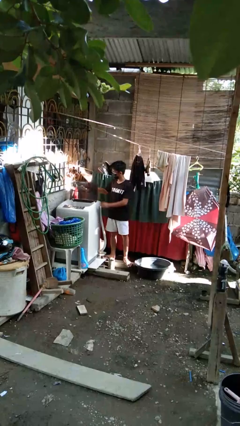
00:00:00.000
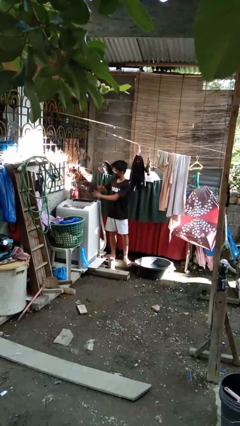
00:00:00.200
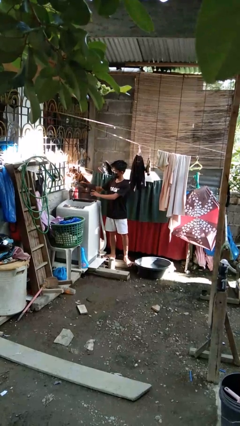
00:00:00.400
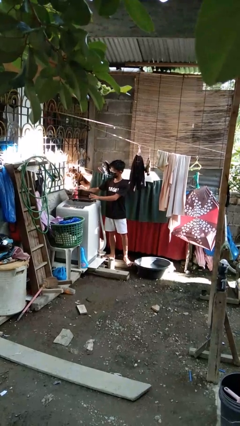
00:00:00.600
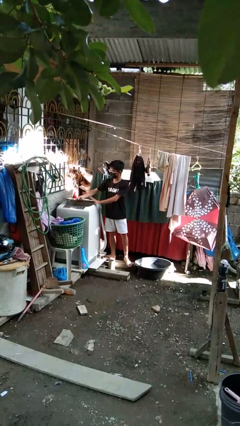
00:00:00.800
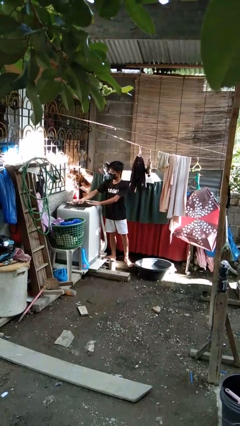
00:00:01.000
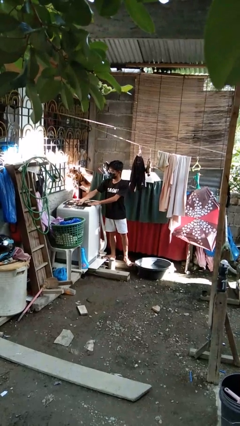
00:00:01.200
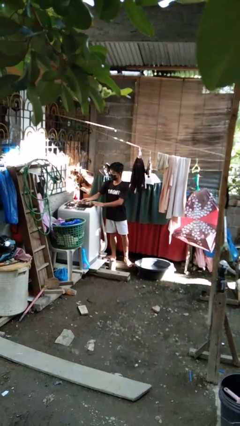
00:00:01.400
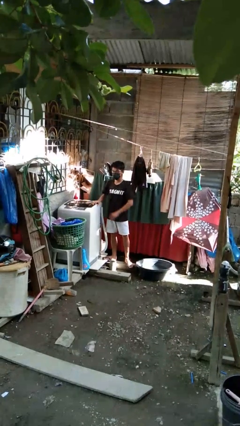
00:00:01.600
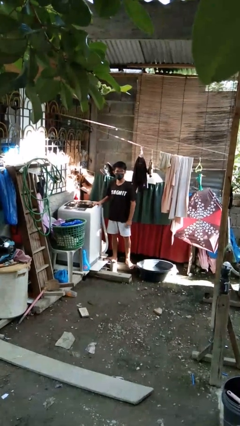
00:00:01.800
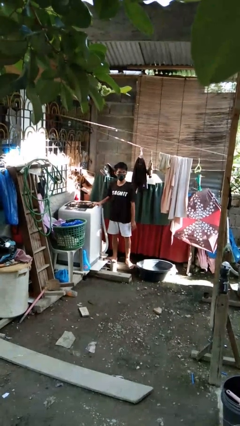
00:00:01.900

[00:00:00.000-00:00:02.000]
person closes clothes washer

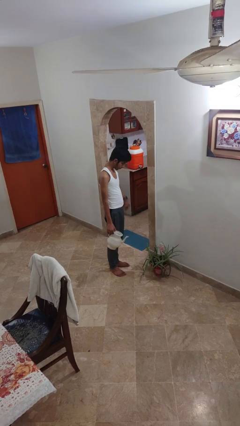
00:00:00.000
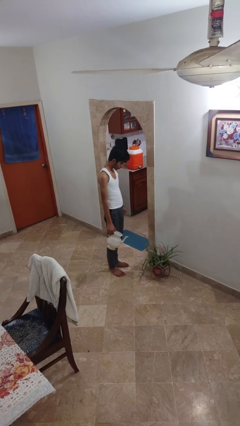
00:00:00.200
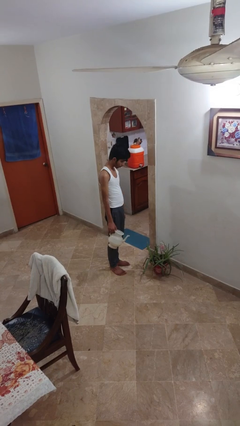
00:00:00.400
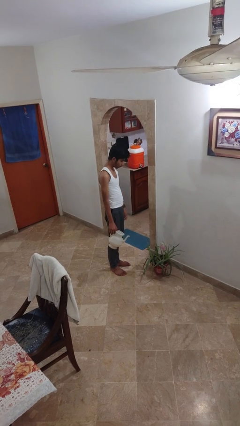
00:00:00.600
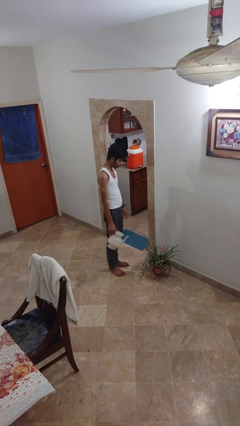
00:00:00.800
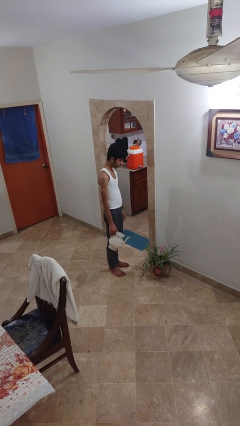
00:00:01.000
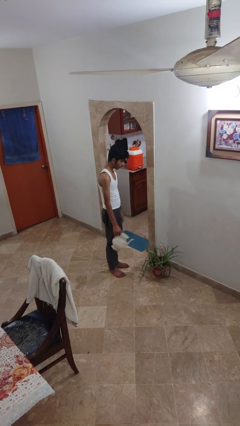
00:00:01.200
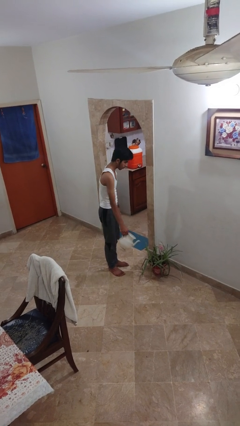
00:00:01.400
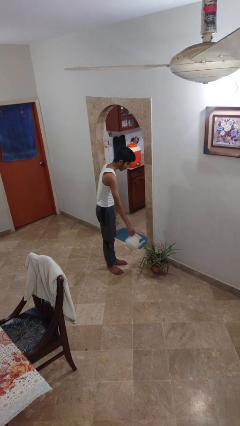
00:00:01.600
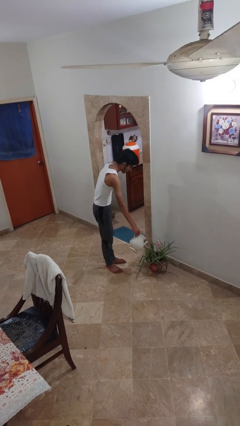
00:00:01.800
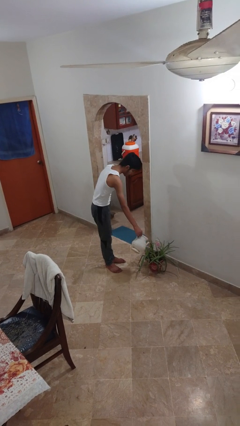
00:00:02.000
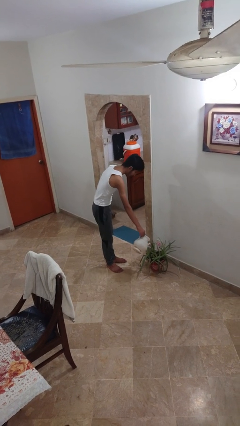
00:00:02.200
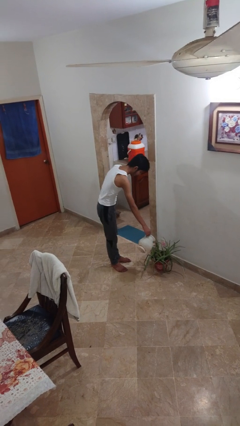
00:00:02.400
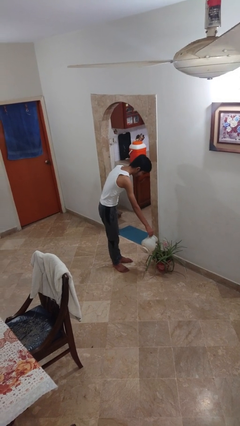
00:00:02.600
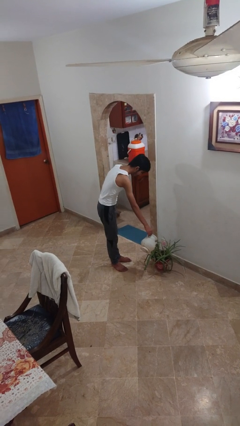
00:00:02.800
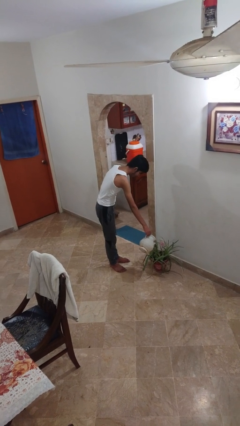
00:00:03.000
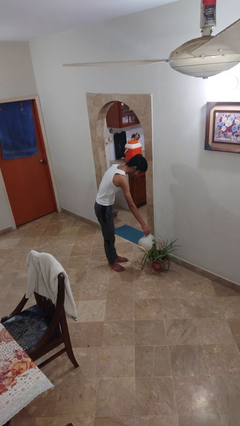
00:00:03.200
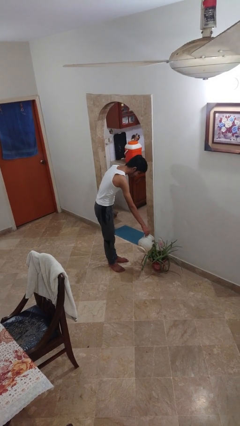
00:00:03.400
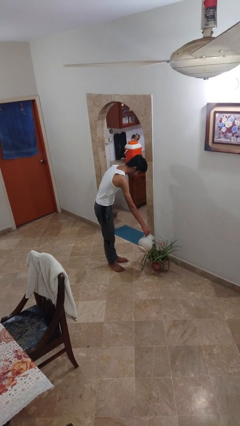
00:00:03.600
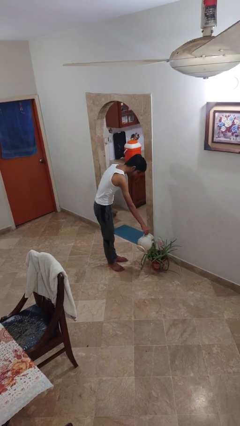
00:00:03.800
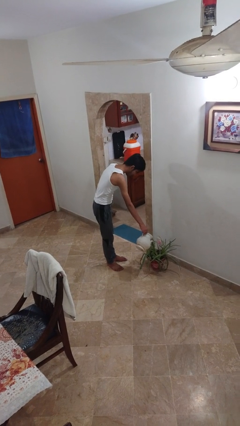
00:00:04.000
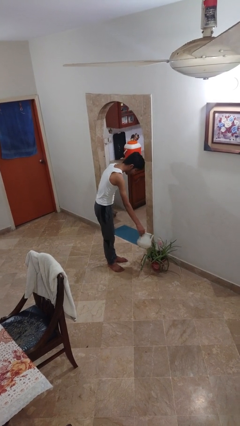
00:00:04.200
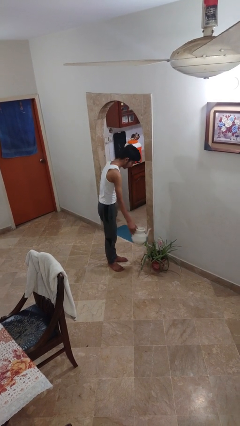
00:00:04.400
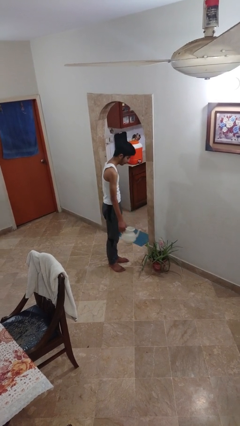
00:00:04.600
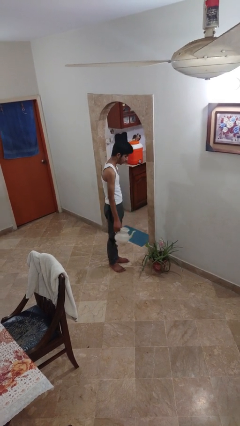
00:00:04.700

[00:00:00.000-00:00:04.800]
person waters houseplant

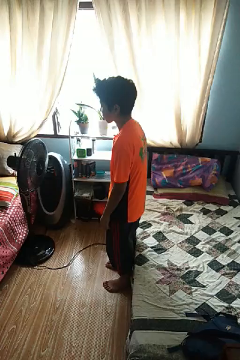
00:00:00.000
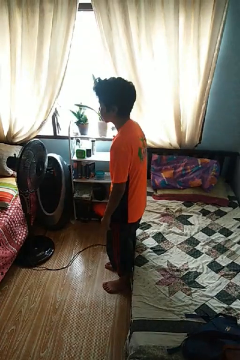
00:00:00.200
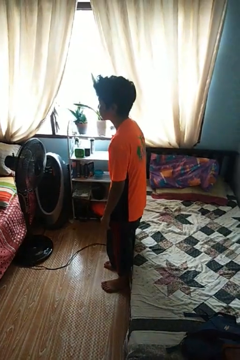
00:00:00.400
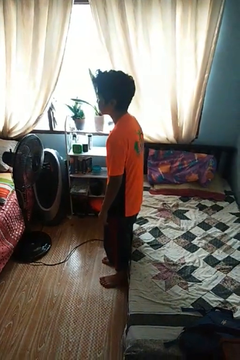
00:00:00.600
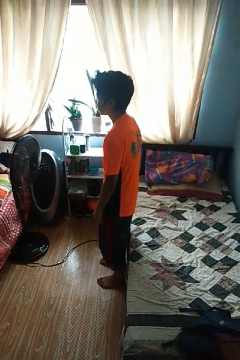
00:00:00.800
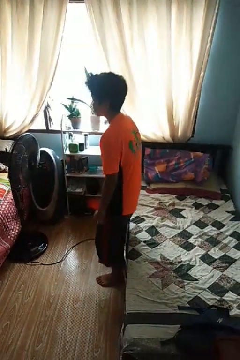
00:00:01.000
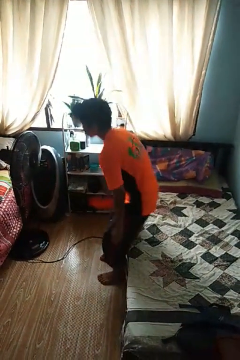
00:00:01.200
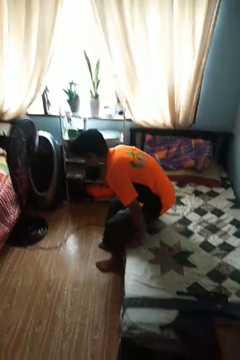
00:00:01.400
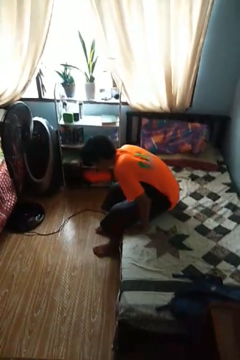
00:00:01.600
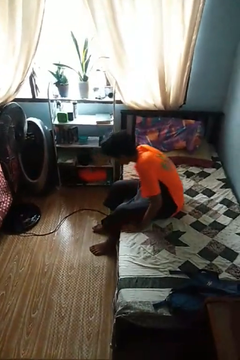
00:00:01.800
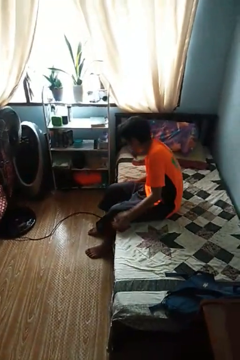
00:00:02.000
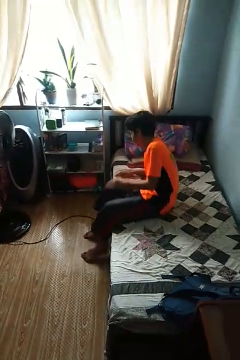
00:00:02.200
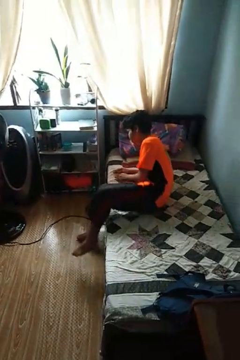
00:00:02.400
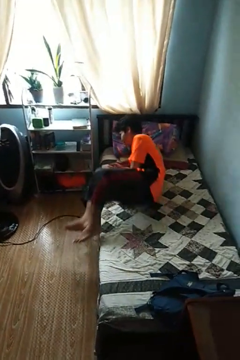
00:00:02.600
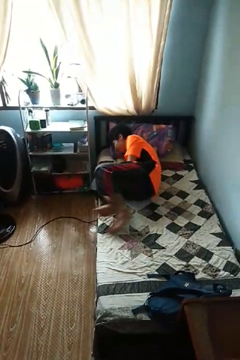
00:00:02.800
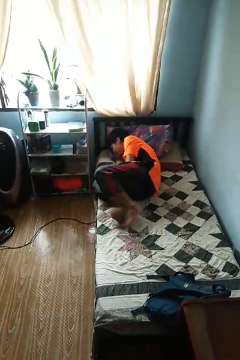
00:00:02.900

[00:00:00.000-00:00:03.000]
person lies down on bed

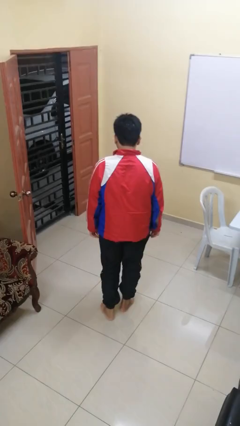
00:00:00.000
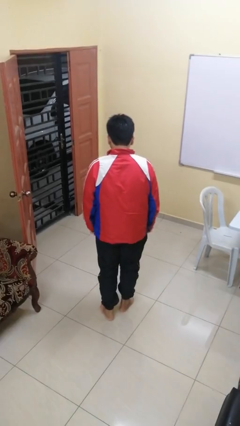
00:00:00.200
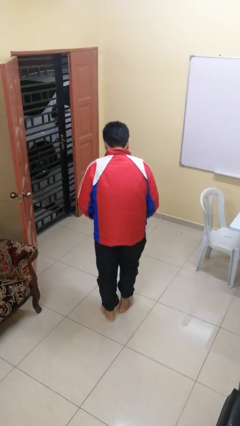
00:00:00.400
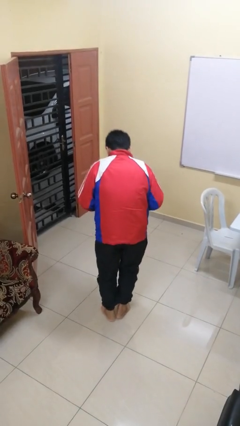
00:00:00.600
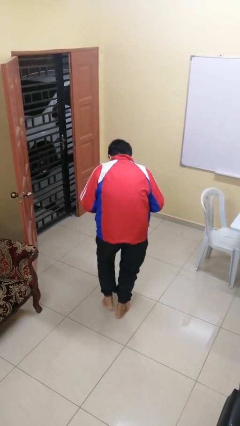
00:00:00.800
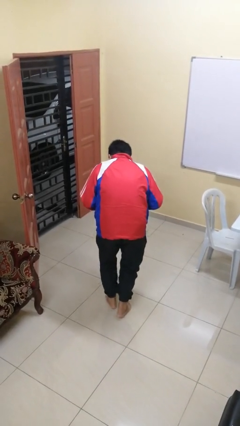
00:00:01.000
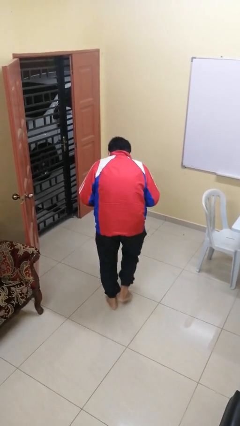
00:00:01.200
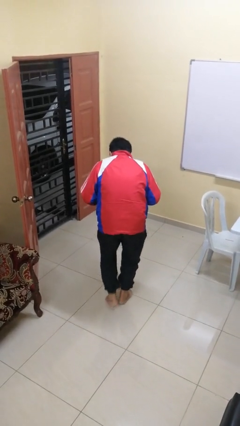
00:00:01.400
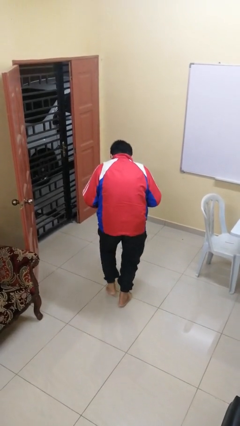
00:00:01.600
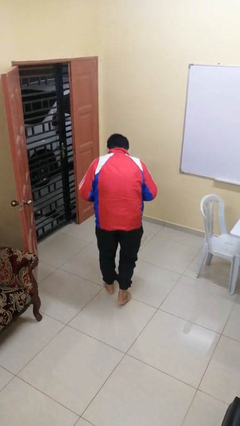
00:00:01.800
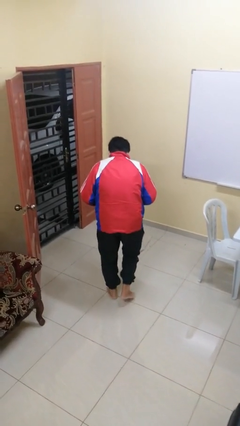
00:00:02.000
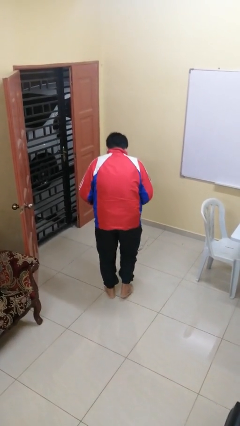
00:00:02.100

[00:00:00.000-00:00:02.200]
person walks tiptoe

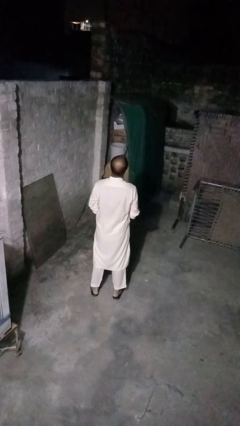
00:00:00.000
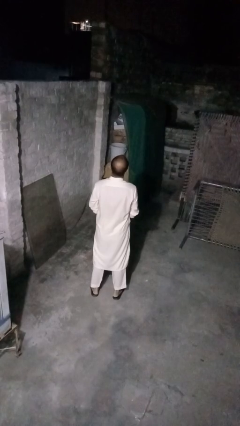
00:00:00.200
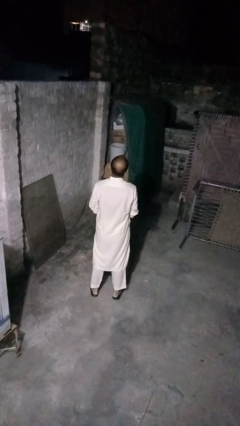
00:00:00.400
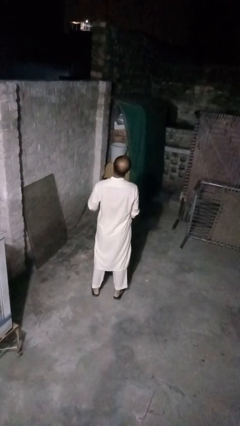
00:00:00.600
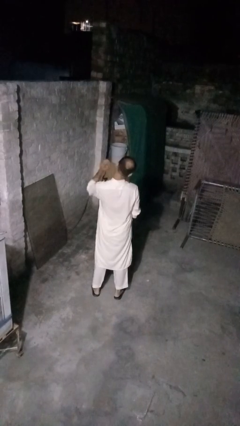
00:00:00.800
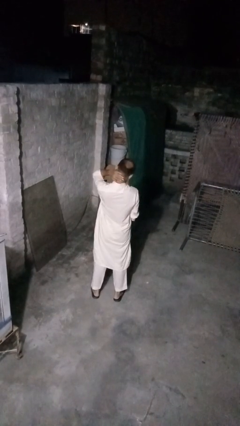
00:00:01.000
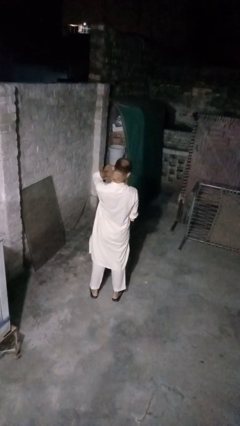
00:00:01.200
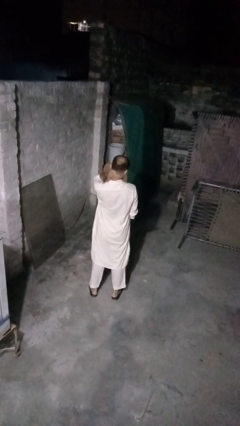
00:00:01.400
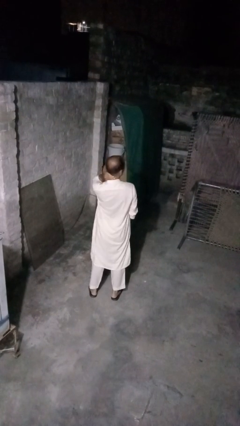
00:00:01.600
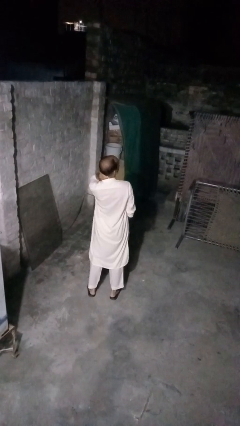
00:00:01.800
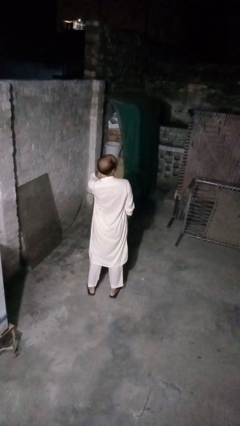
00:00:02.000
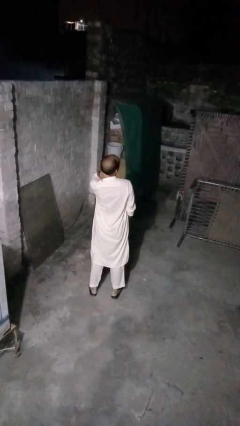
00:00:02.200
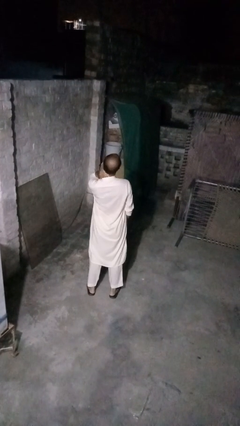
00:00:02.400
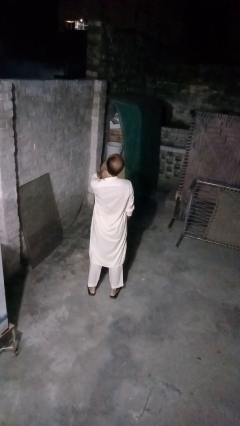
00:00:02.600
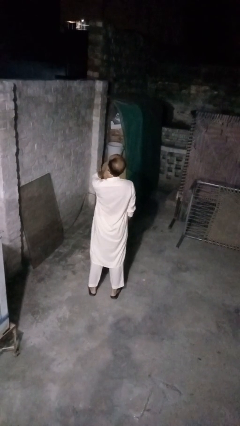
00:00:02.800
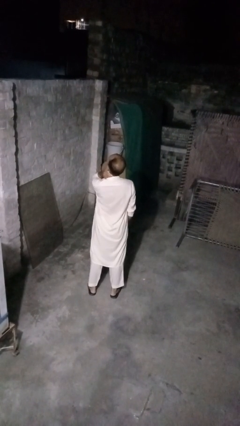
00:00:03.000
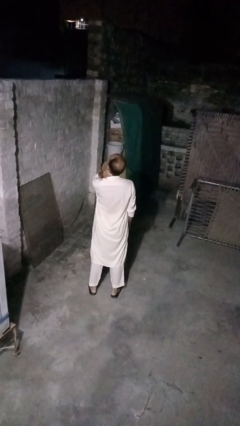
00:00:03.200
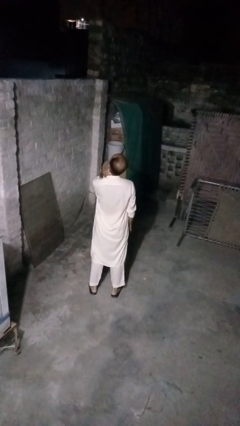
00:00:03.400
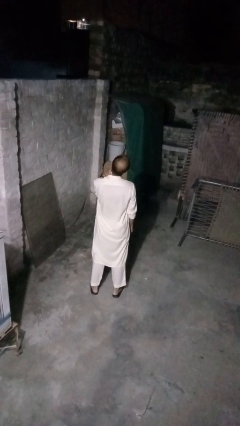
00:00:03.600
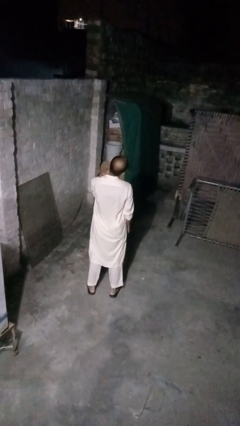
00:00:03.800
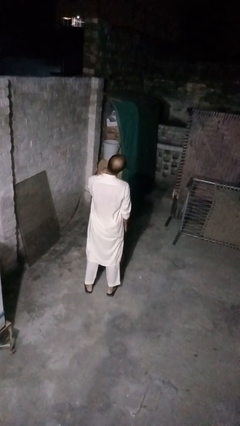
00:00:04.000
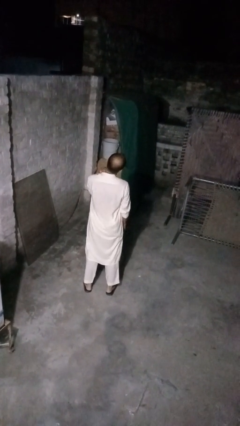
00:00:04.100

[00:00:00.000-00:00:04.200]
person rubs neck

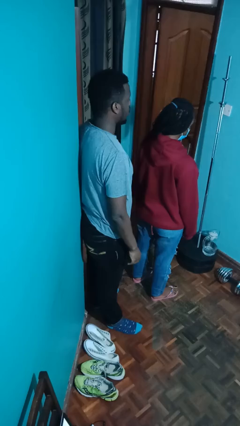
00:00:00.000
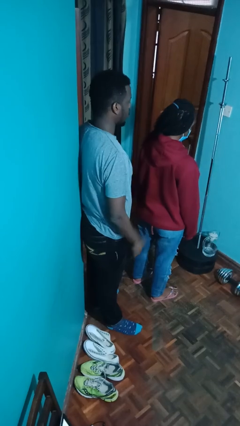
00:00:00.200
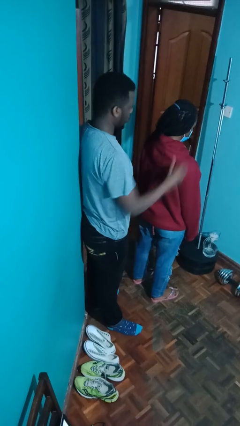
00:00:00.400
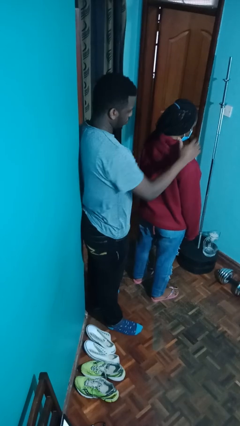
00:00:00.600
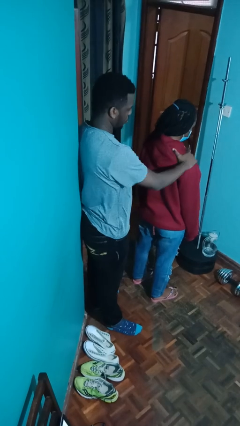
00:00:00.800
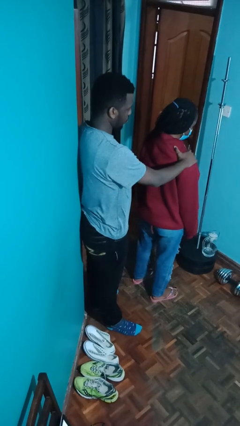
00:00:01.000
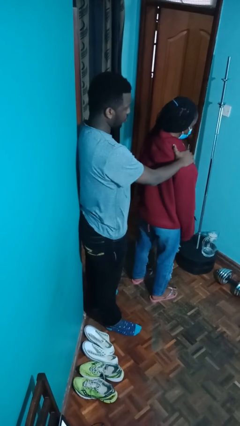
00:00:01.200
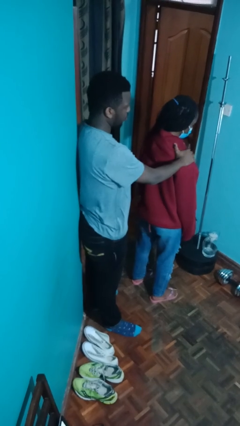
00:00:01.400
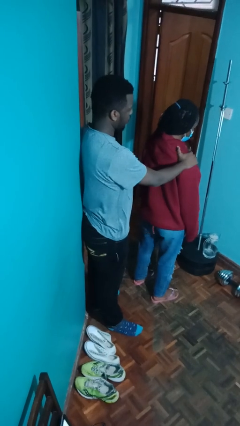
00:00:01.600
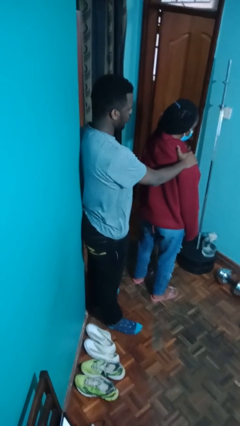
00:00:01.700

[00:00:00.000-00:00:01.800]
person grabs person by shoulder
